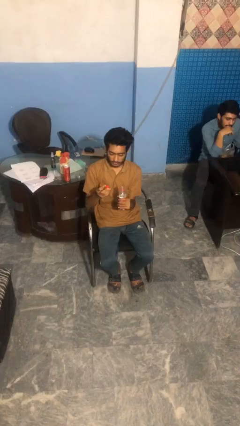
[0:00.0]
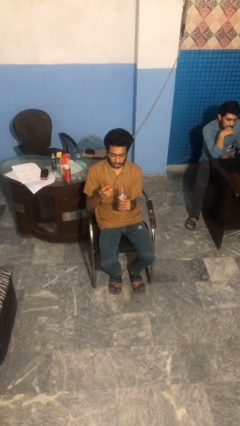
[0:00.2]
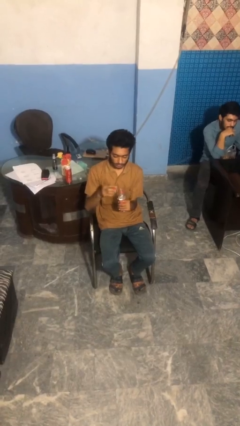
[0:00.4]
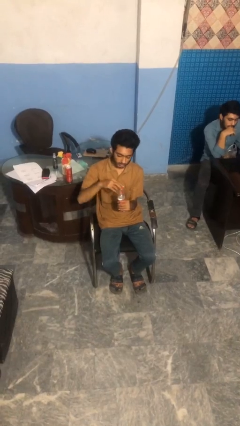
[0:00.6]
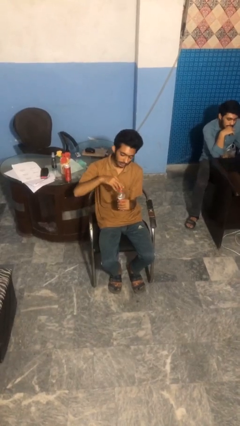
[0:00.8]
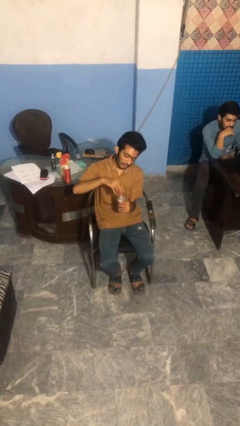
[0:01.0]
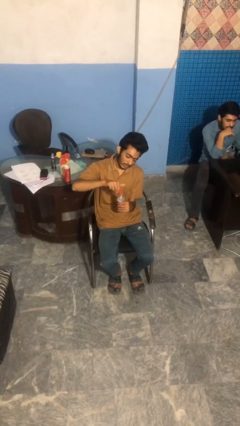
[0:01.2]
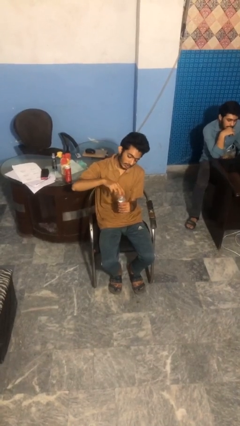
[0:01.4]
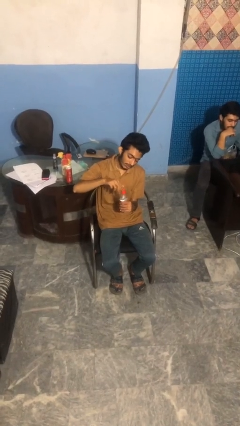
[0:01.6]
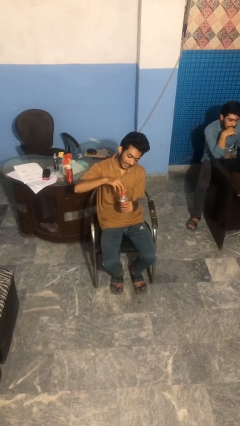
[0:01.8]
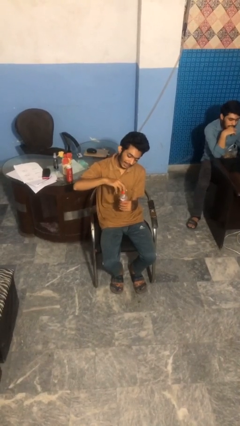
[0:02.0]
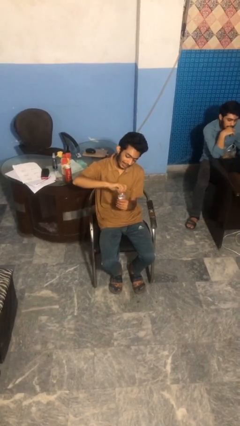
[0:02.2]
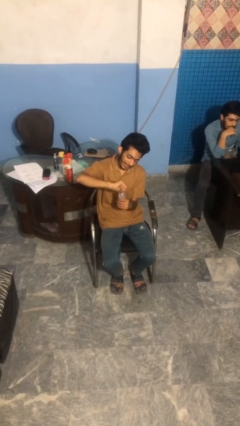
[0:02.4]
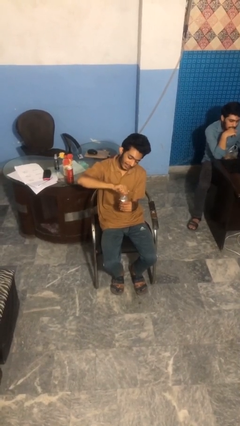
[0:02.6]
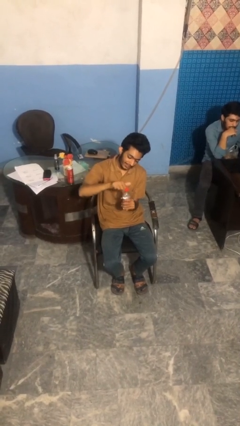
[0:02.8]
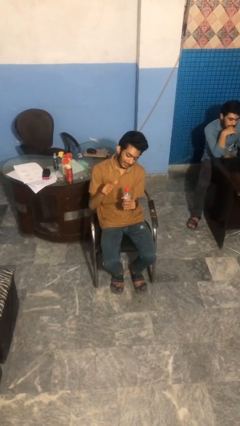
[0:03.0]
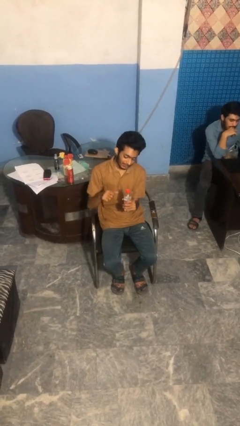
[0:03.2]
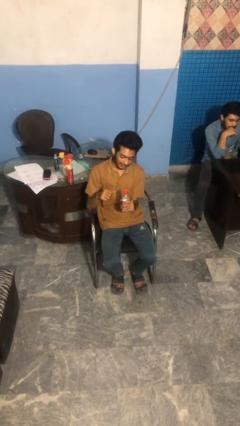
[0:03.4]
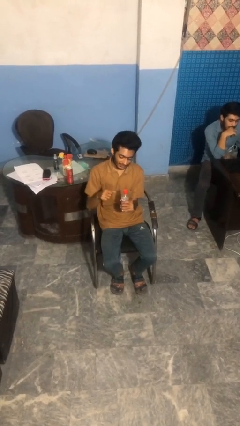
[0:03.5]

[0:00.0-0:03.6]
person screws lid to bottle

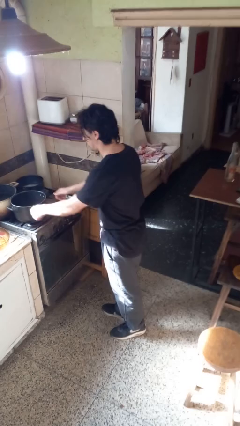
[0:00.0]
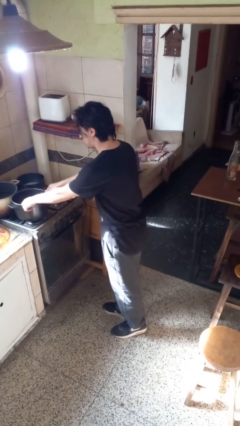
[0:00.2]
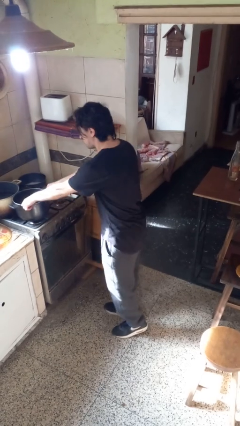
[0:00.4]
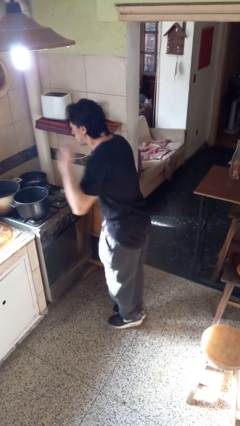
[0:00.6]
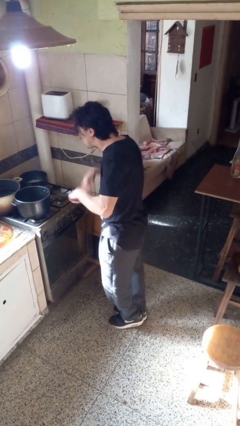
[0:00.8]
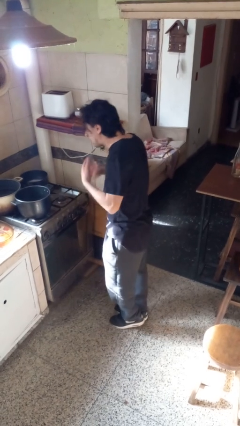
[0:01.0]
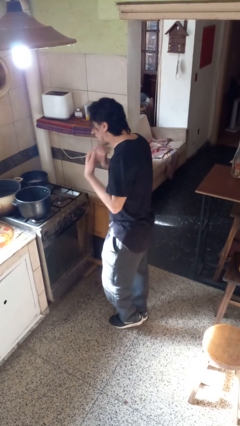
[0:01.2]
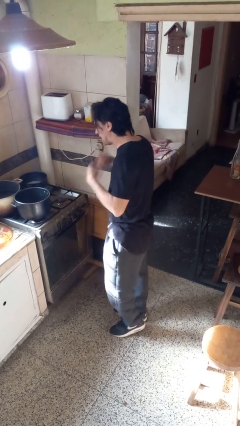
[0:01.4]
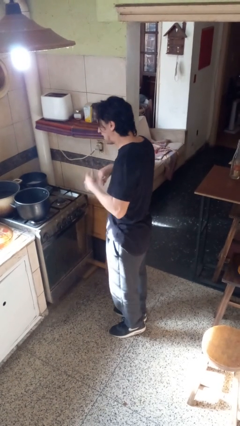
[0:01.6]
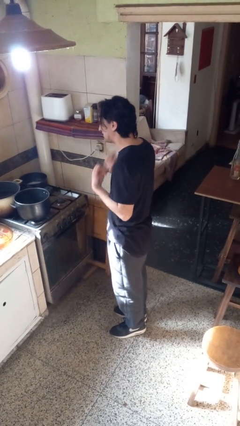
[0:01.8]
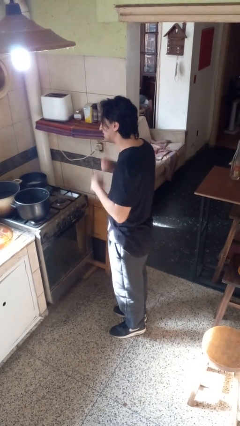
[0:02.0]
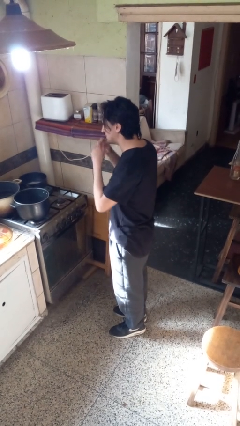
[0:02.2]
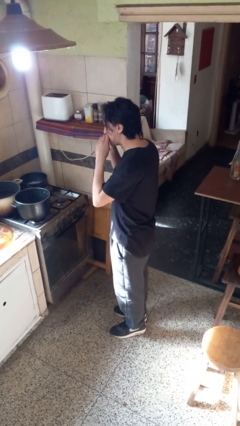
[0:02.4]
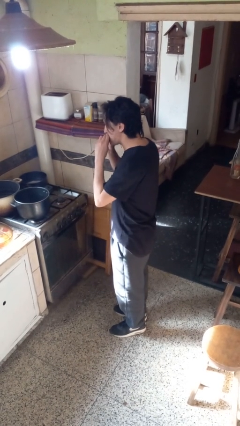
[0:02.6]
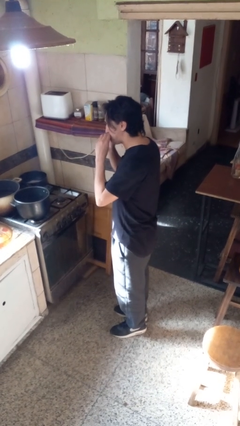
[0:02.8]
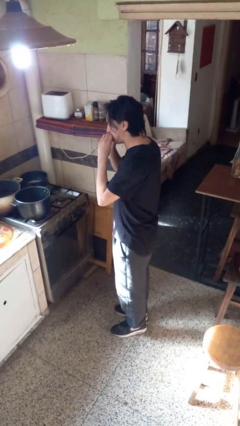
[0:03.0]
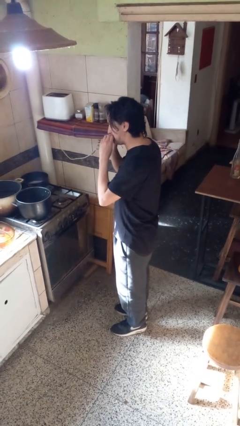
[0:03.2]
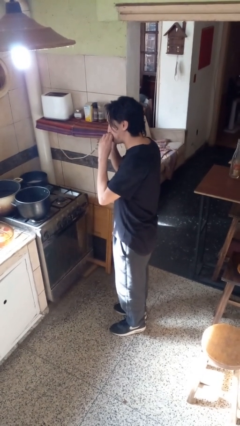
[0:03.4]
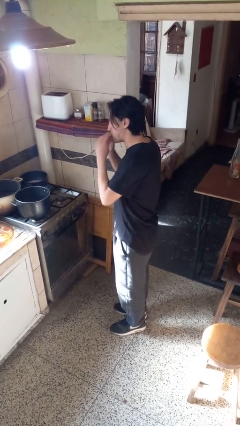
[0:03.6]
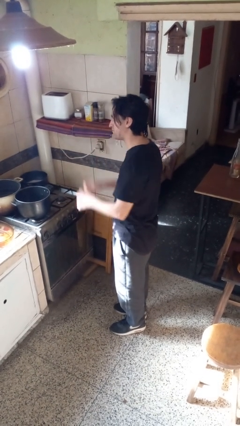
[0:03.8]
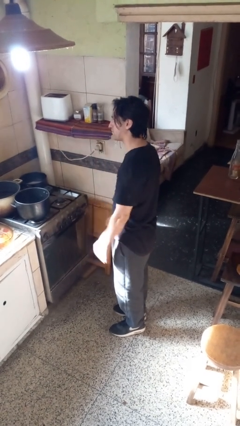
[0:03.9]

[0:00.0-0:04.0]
person burns hand

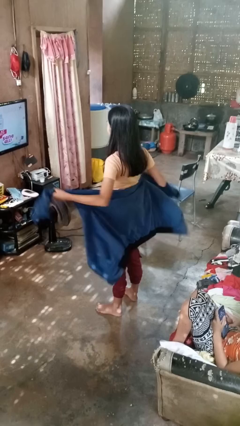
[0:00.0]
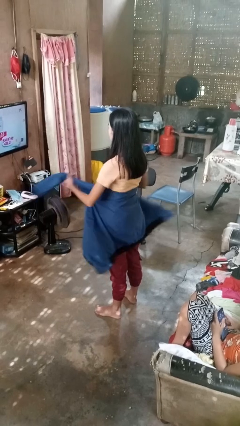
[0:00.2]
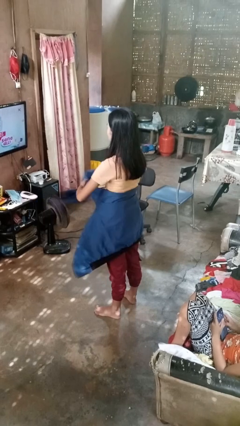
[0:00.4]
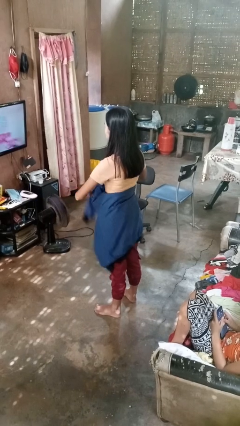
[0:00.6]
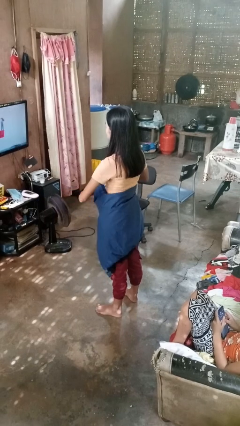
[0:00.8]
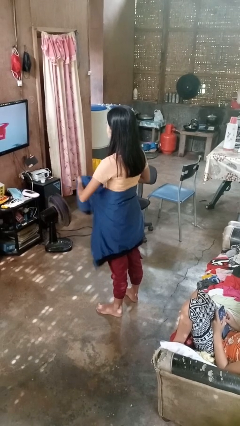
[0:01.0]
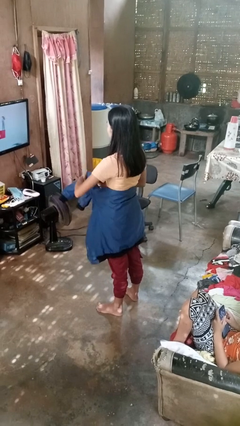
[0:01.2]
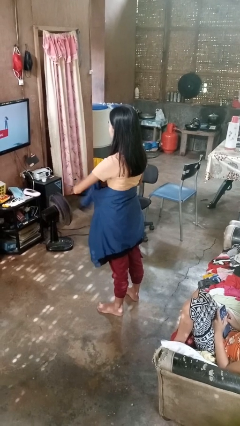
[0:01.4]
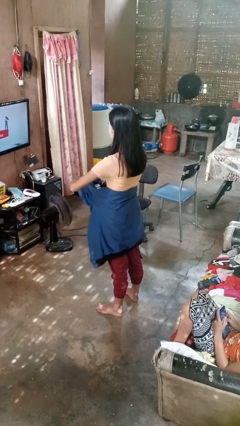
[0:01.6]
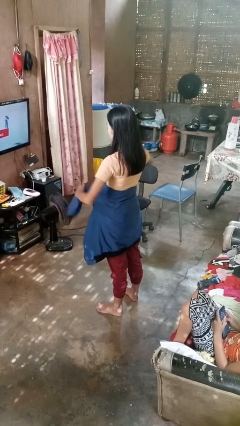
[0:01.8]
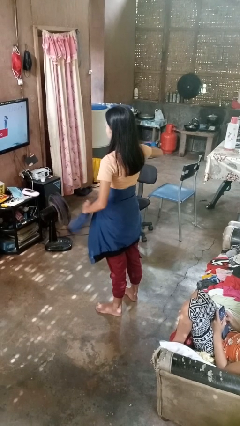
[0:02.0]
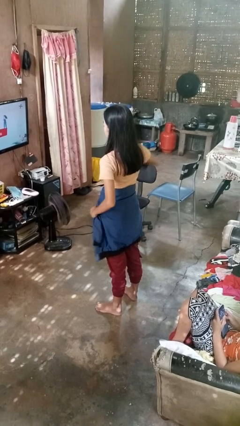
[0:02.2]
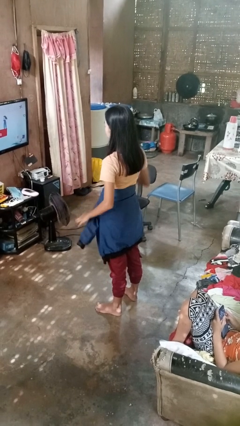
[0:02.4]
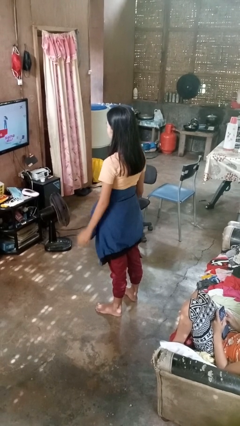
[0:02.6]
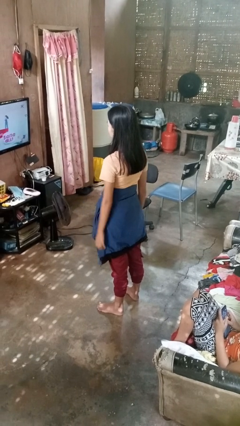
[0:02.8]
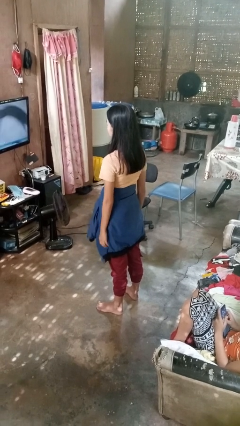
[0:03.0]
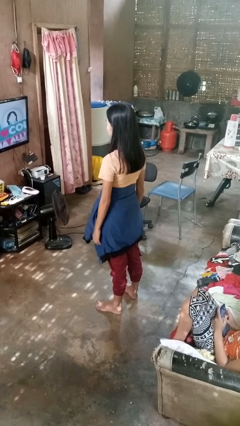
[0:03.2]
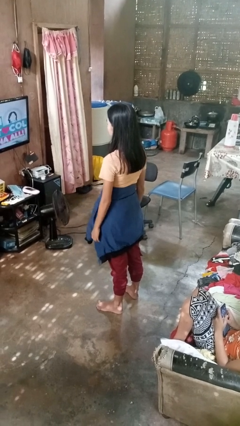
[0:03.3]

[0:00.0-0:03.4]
person ties jacket around waist

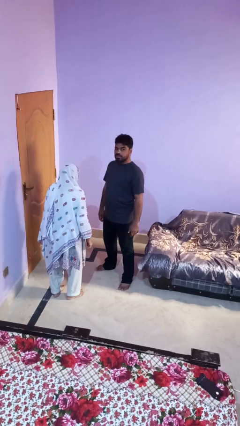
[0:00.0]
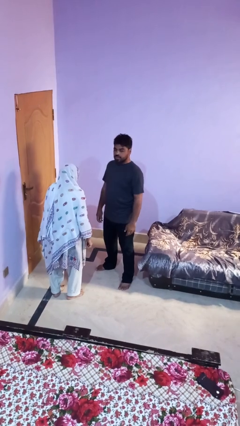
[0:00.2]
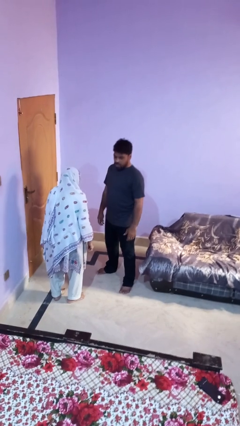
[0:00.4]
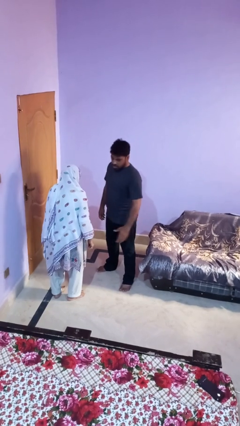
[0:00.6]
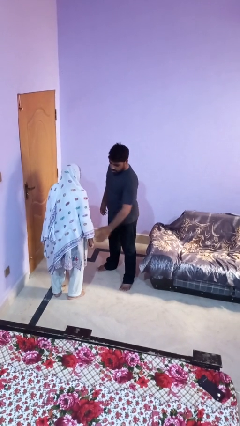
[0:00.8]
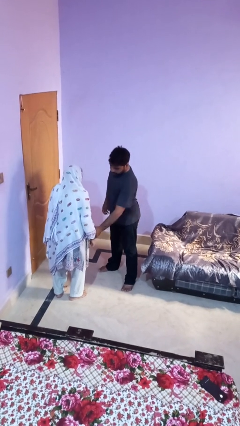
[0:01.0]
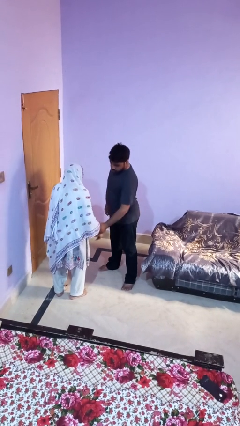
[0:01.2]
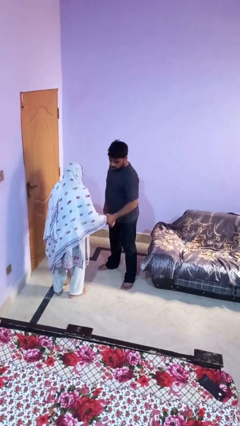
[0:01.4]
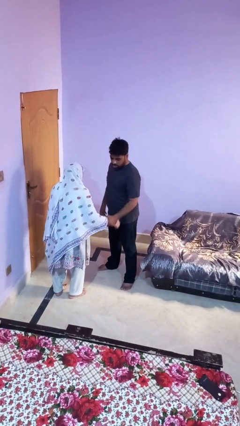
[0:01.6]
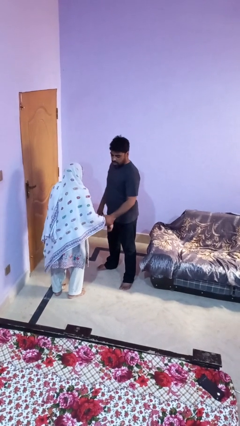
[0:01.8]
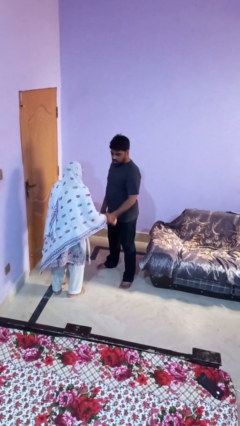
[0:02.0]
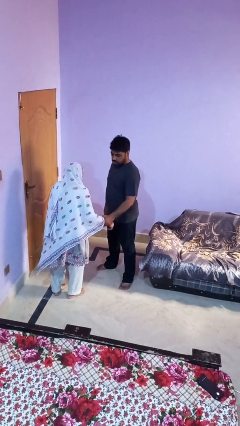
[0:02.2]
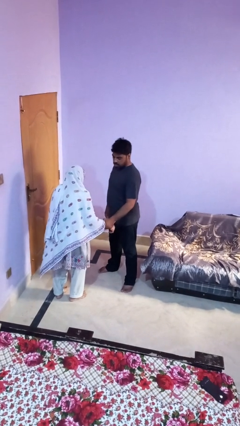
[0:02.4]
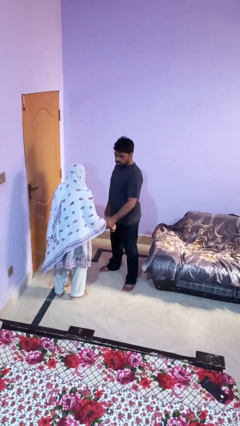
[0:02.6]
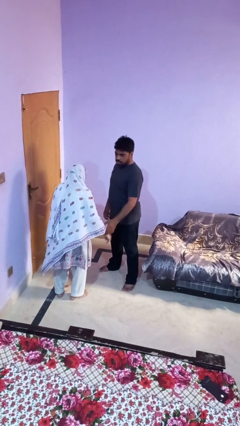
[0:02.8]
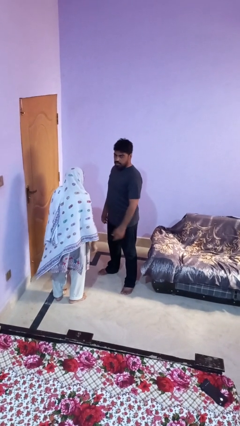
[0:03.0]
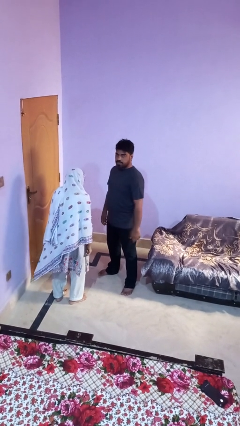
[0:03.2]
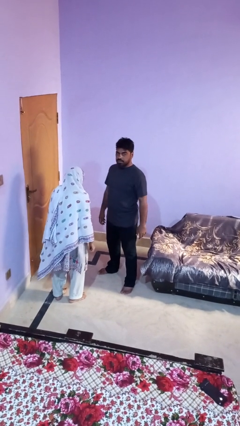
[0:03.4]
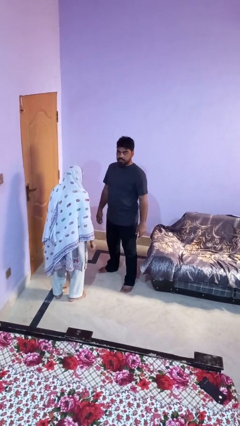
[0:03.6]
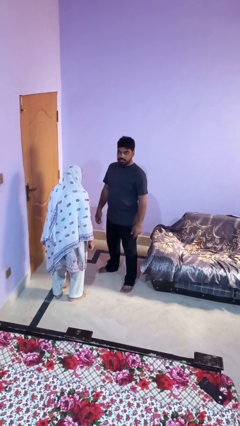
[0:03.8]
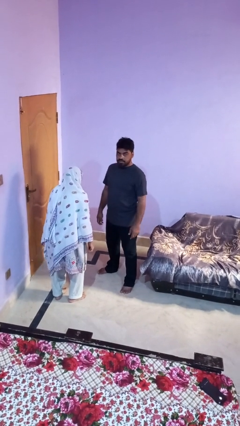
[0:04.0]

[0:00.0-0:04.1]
person grabs person by forearm

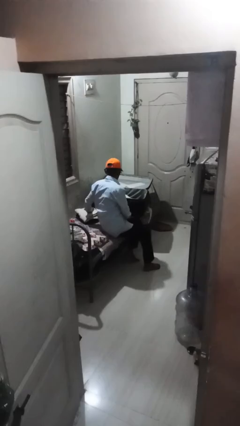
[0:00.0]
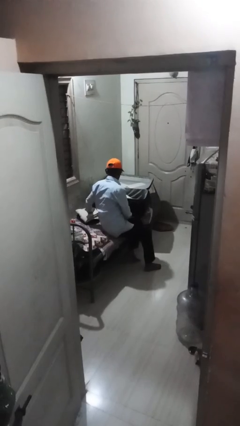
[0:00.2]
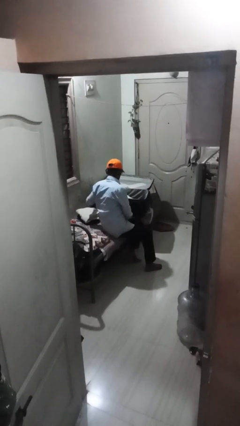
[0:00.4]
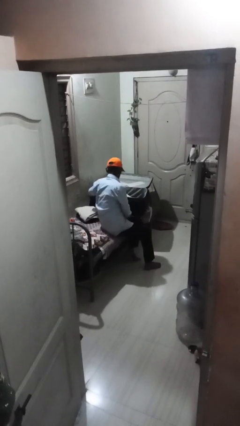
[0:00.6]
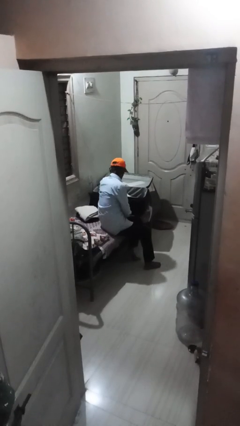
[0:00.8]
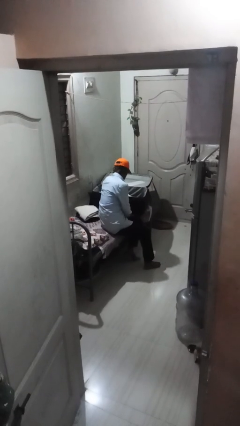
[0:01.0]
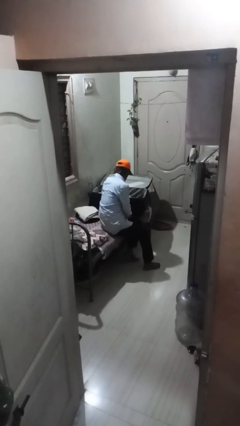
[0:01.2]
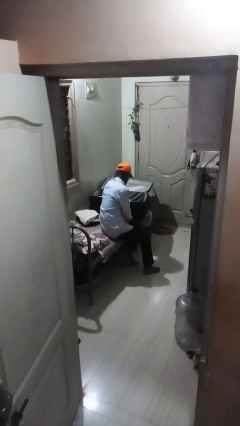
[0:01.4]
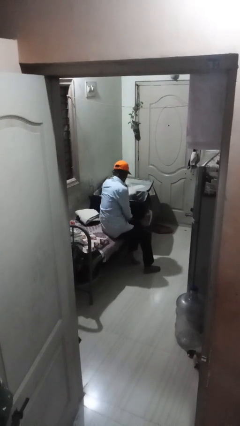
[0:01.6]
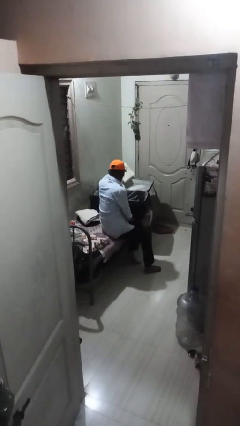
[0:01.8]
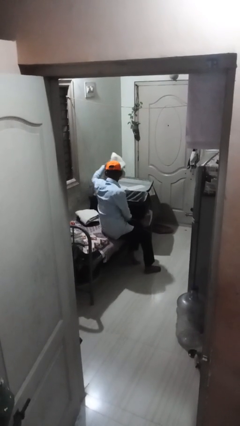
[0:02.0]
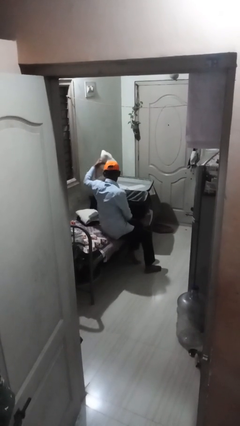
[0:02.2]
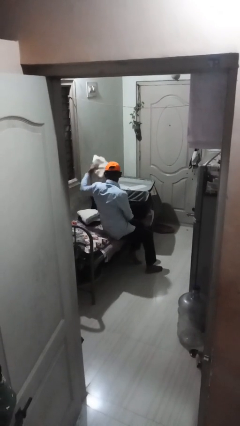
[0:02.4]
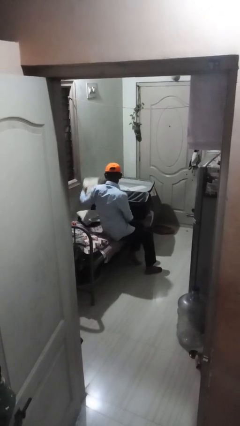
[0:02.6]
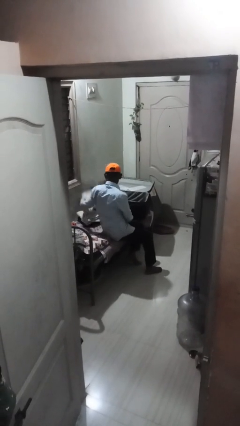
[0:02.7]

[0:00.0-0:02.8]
person unloads clothes from suitcase
